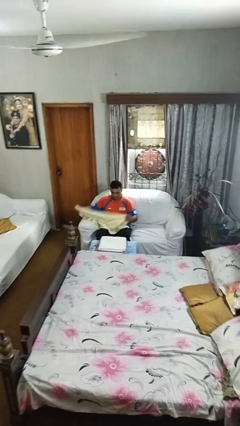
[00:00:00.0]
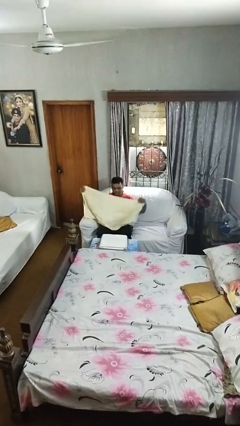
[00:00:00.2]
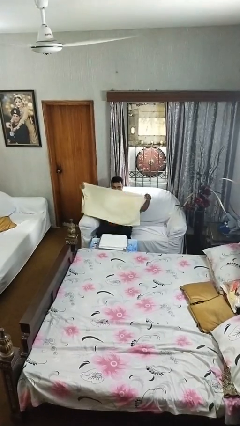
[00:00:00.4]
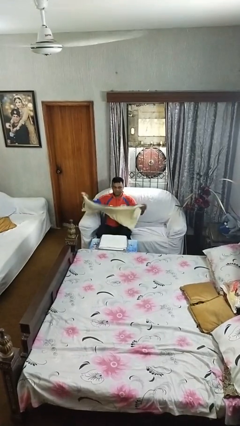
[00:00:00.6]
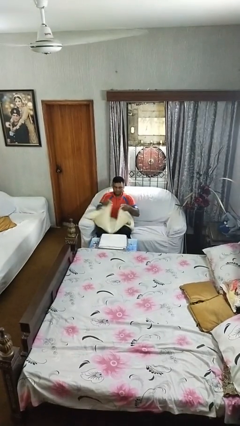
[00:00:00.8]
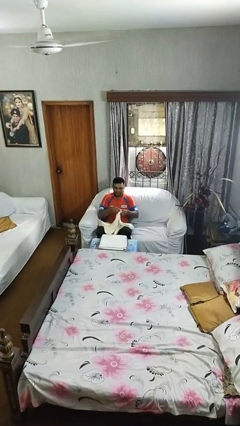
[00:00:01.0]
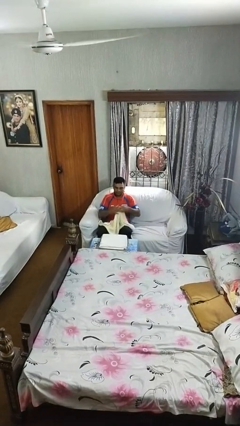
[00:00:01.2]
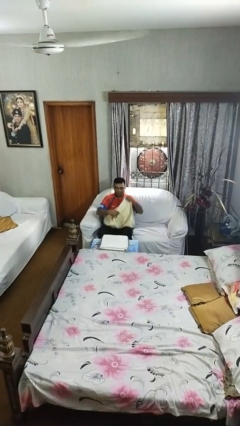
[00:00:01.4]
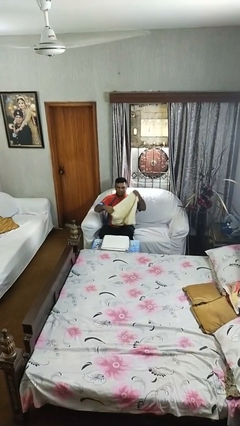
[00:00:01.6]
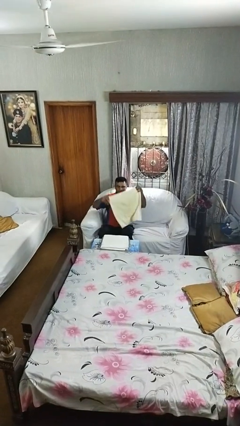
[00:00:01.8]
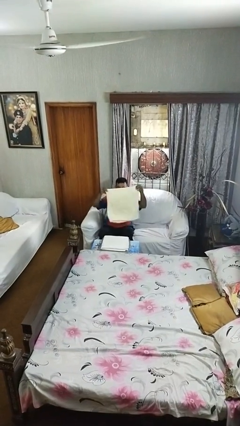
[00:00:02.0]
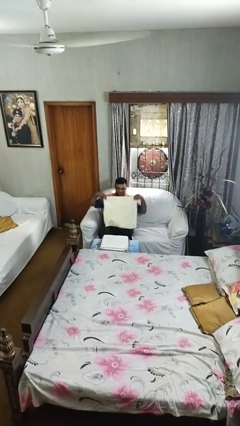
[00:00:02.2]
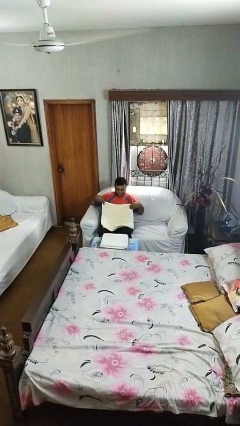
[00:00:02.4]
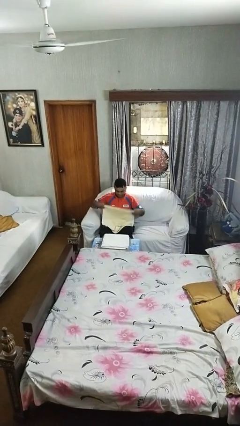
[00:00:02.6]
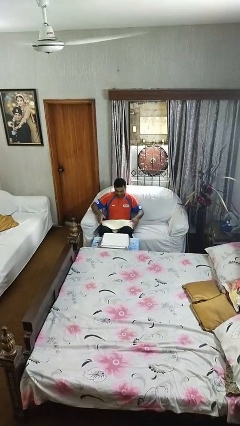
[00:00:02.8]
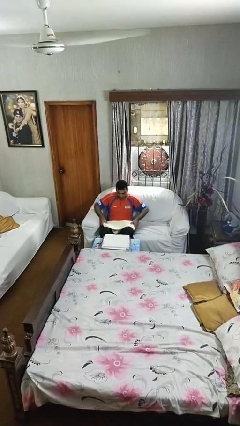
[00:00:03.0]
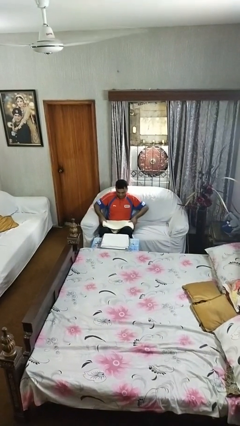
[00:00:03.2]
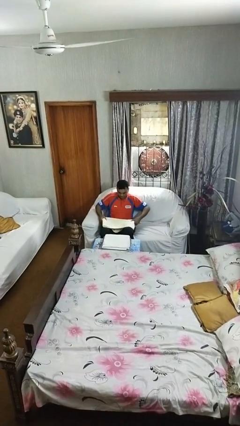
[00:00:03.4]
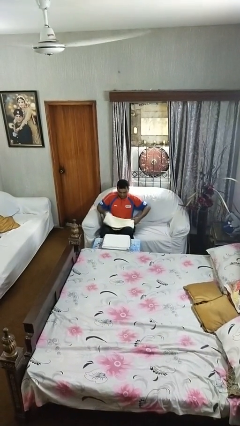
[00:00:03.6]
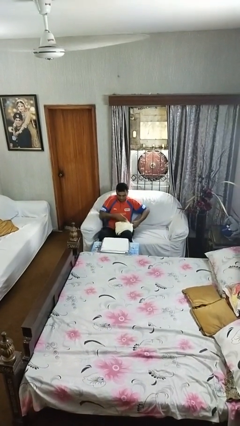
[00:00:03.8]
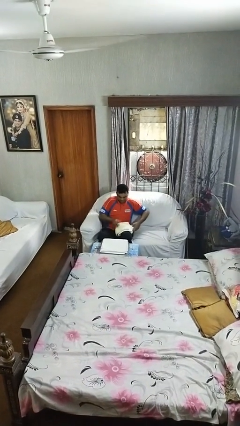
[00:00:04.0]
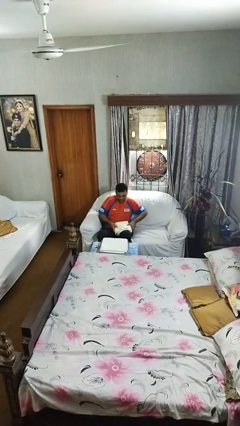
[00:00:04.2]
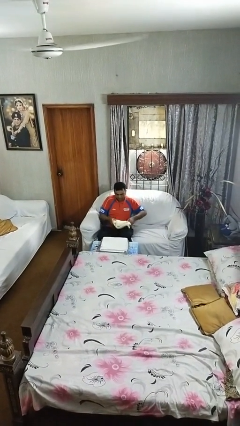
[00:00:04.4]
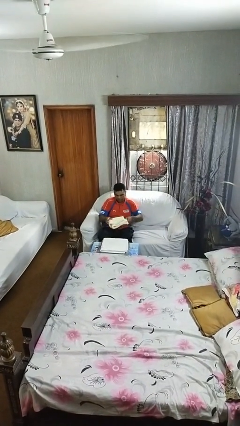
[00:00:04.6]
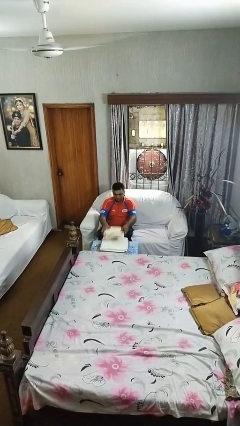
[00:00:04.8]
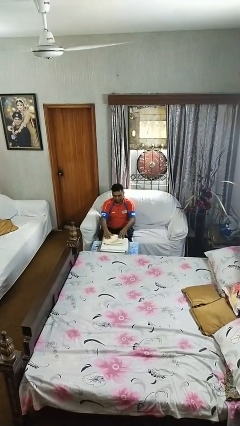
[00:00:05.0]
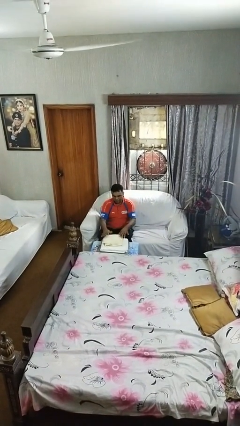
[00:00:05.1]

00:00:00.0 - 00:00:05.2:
person folds towel

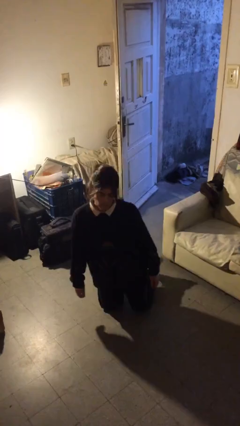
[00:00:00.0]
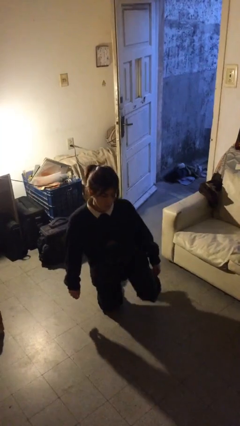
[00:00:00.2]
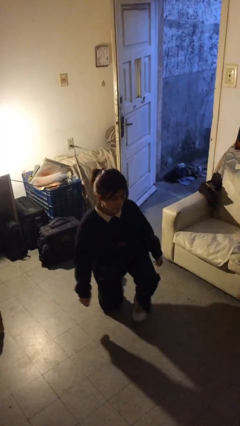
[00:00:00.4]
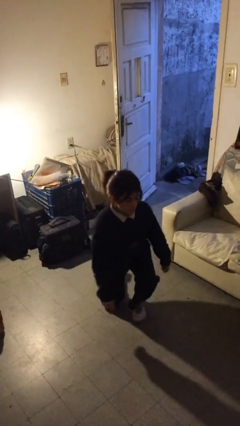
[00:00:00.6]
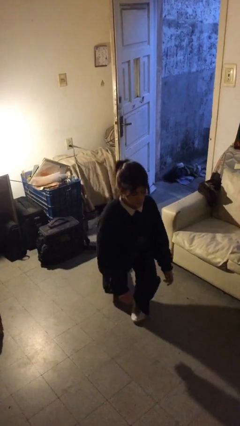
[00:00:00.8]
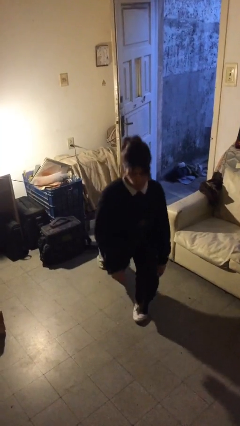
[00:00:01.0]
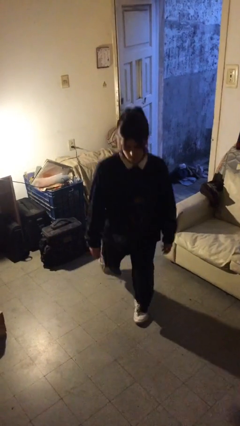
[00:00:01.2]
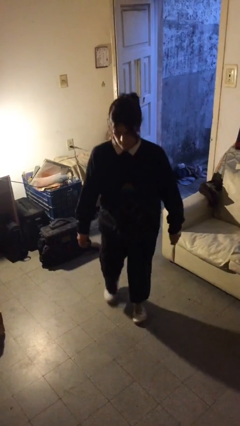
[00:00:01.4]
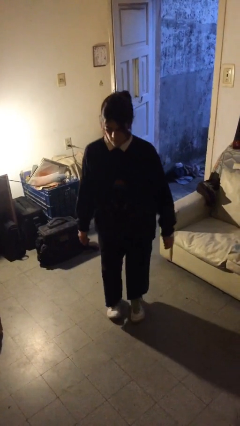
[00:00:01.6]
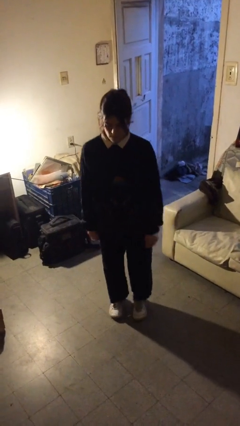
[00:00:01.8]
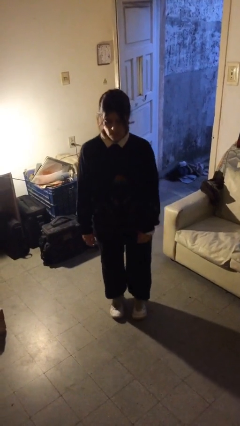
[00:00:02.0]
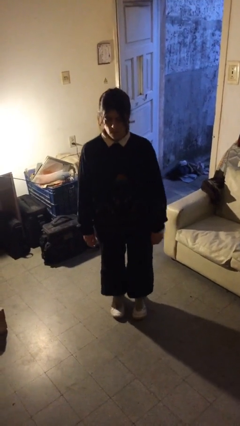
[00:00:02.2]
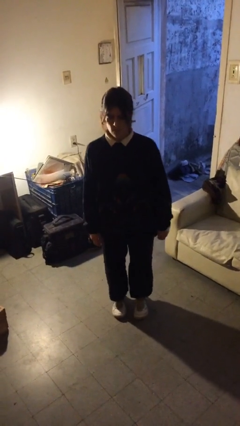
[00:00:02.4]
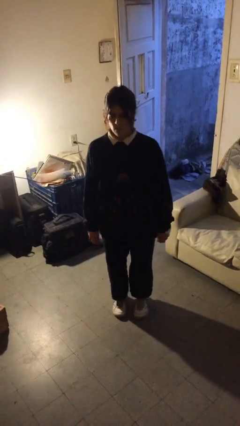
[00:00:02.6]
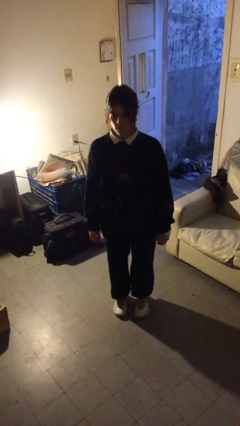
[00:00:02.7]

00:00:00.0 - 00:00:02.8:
person stands up from floor

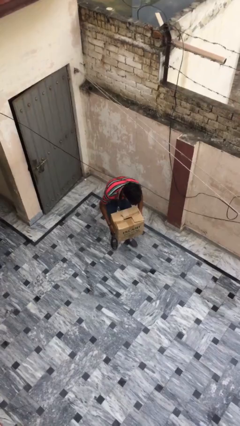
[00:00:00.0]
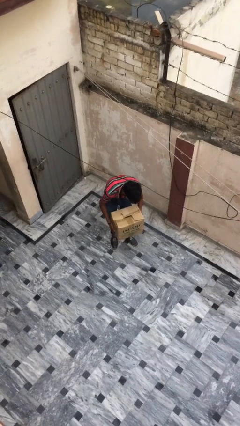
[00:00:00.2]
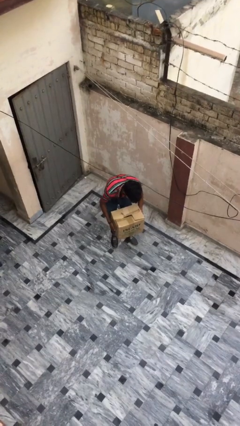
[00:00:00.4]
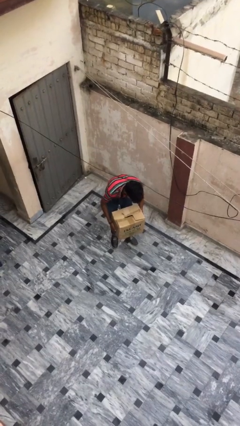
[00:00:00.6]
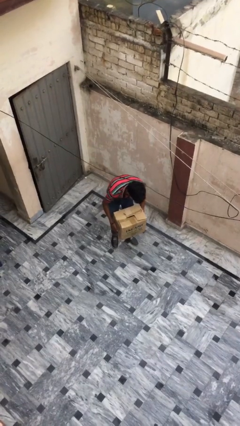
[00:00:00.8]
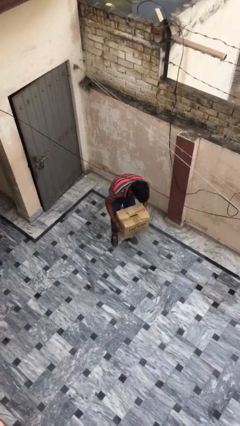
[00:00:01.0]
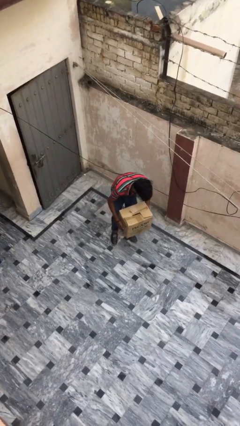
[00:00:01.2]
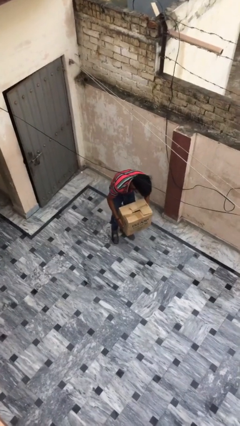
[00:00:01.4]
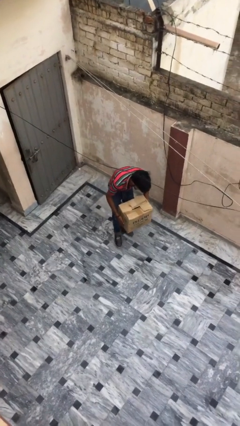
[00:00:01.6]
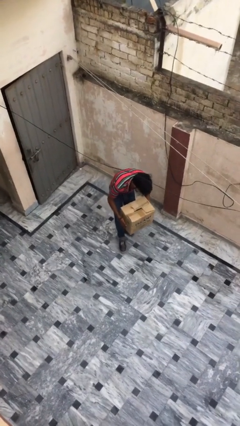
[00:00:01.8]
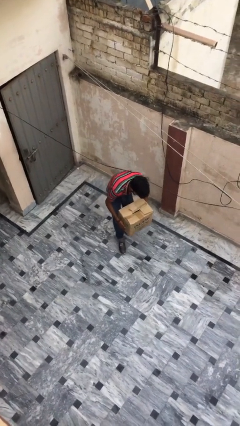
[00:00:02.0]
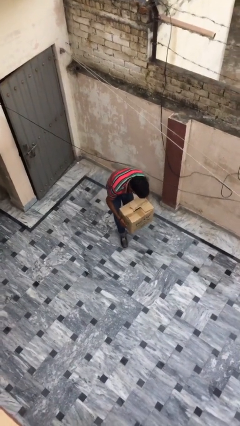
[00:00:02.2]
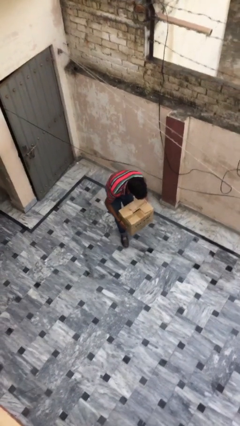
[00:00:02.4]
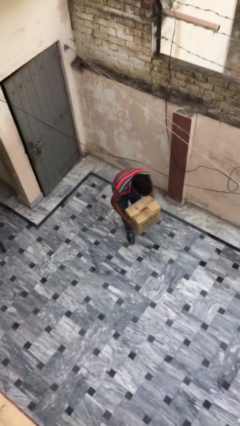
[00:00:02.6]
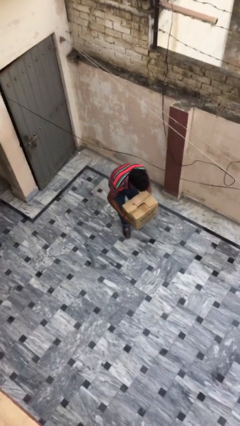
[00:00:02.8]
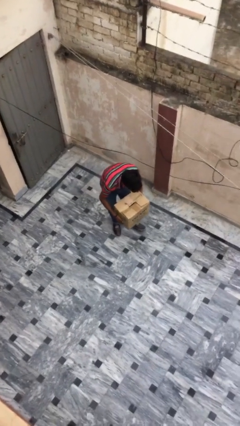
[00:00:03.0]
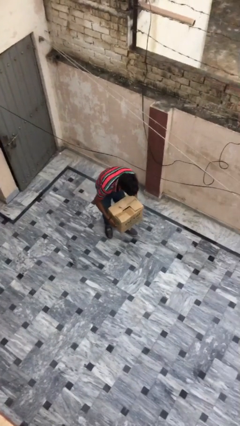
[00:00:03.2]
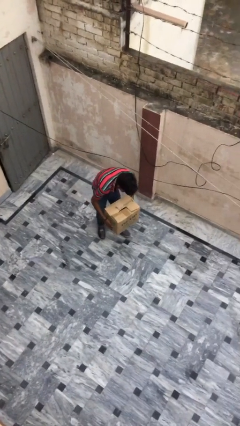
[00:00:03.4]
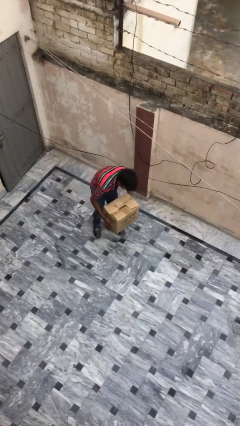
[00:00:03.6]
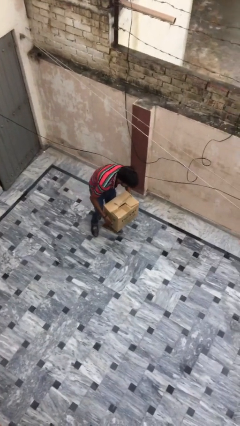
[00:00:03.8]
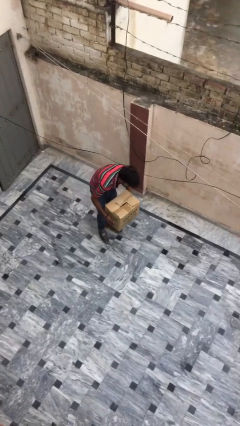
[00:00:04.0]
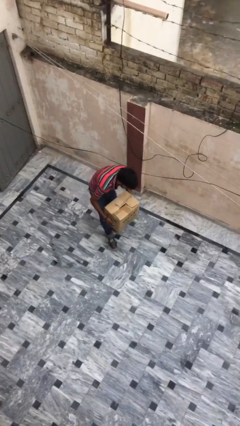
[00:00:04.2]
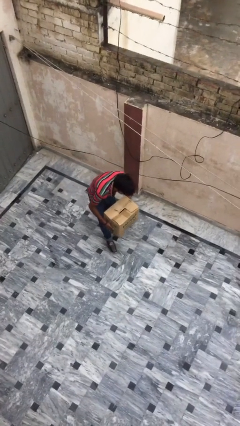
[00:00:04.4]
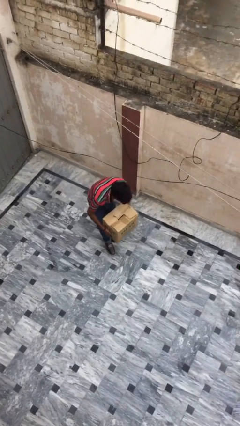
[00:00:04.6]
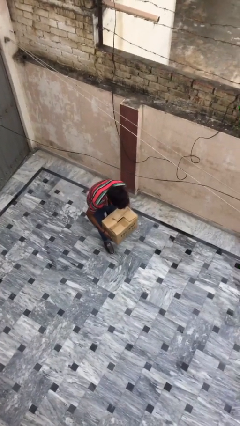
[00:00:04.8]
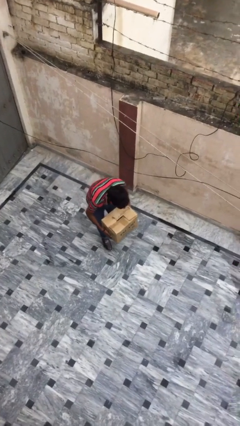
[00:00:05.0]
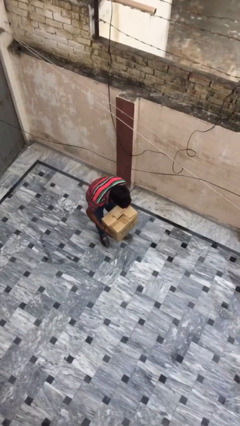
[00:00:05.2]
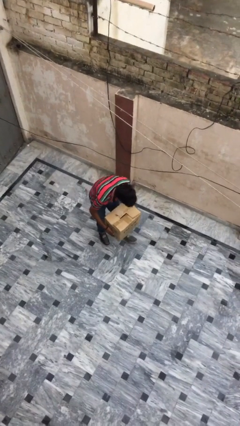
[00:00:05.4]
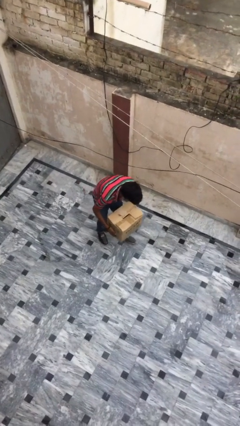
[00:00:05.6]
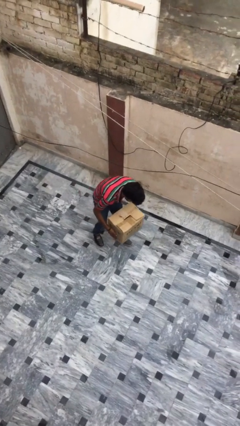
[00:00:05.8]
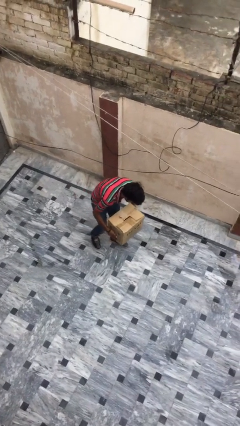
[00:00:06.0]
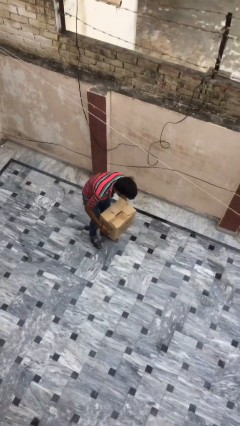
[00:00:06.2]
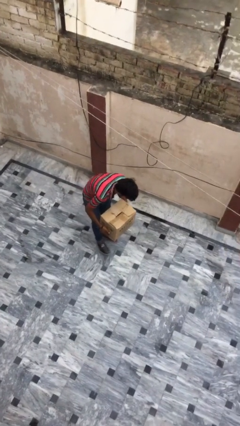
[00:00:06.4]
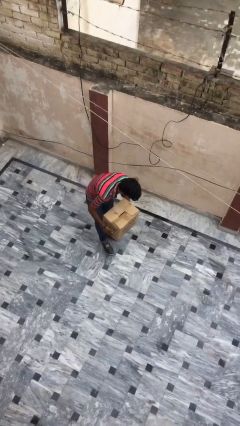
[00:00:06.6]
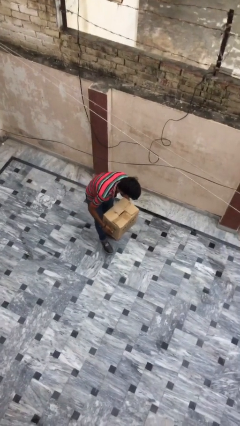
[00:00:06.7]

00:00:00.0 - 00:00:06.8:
person carries heavy object

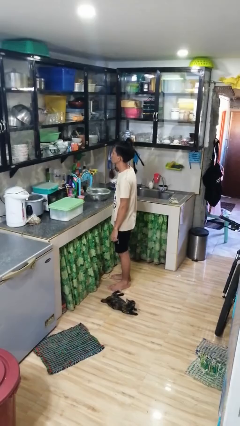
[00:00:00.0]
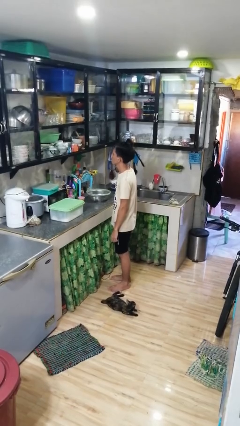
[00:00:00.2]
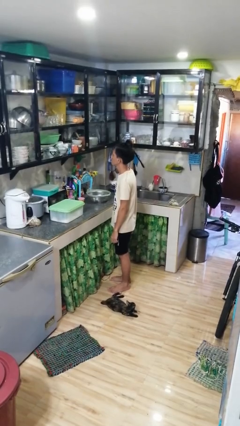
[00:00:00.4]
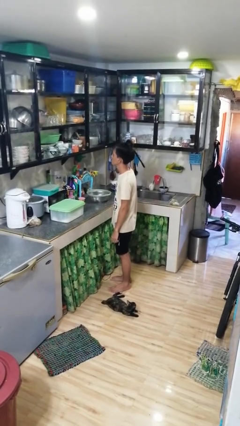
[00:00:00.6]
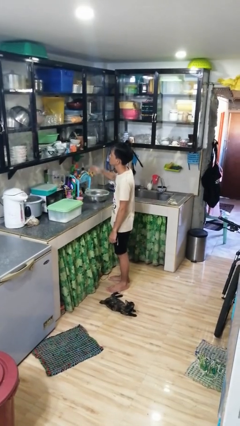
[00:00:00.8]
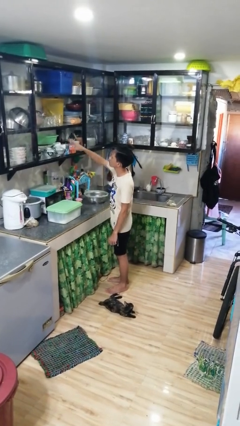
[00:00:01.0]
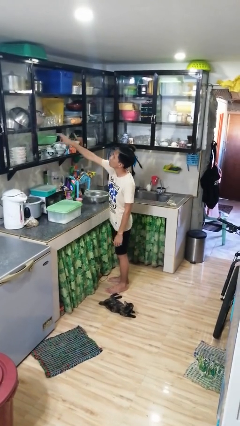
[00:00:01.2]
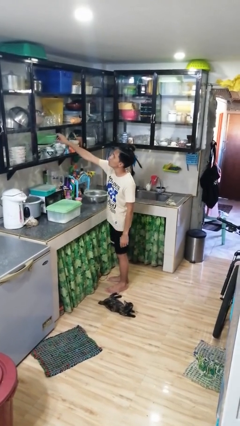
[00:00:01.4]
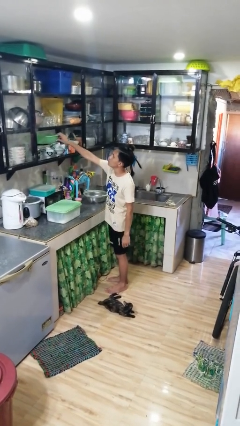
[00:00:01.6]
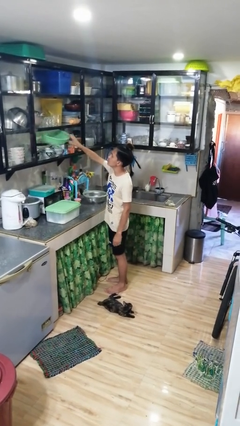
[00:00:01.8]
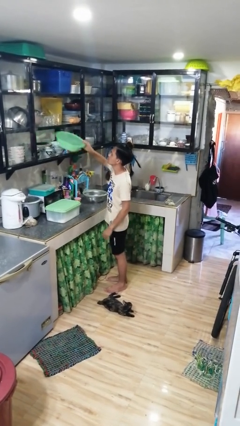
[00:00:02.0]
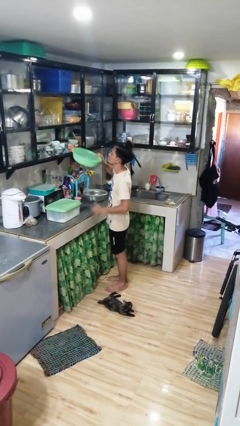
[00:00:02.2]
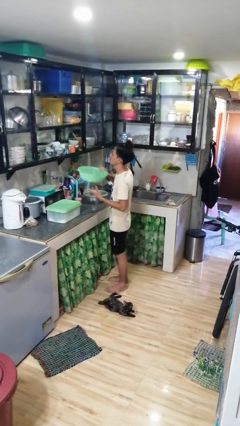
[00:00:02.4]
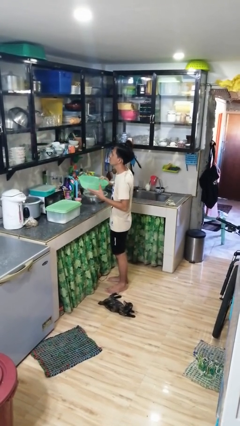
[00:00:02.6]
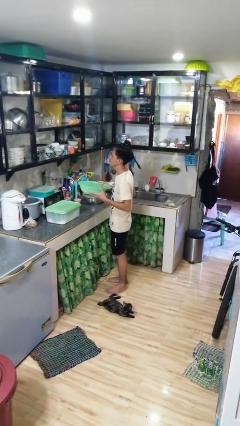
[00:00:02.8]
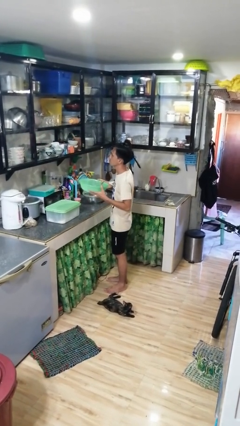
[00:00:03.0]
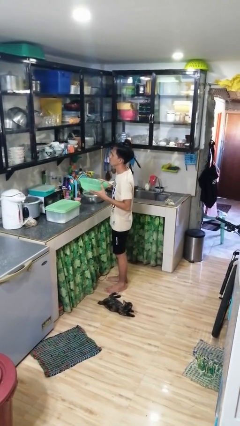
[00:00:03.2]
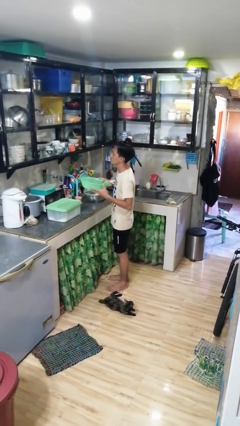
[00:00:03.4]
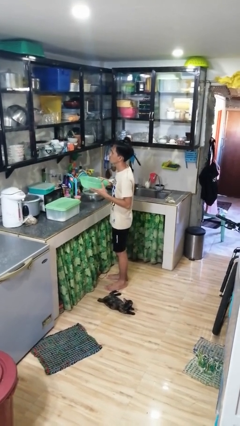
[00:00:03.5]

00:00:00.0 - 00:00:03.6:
person picks up object from cabinet
